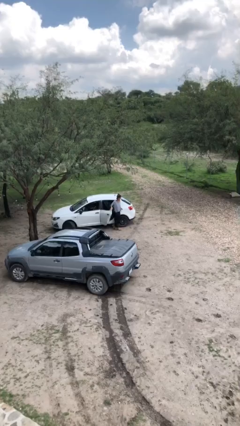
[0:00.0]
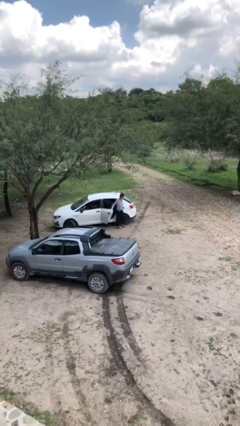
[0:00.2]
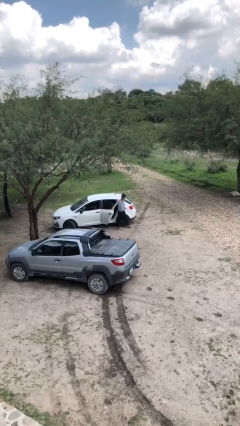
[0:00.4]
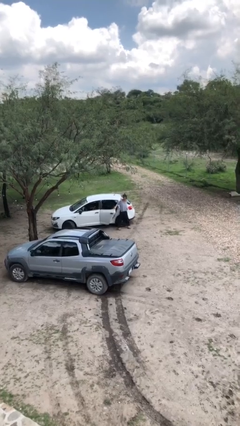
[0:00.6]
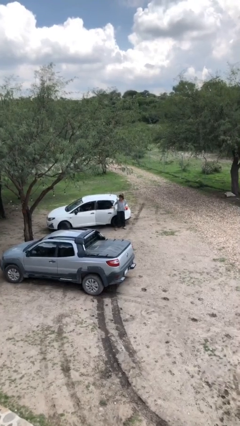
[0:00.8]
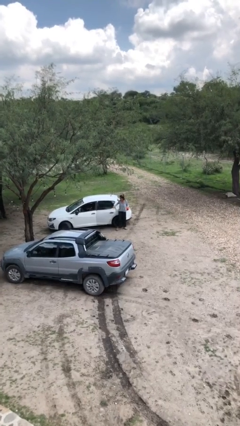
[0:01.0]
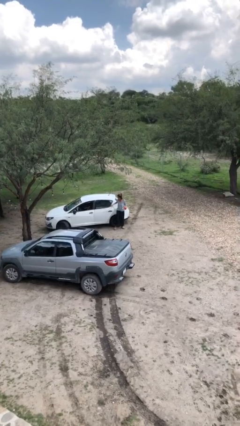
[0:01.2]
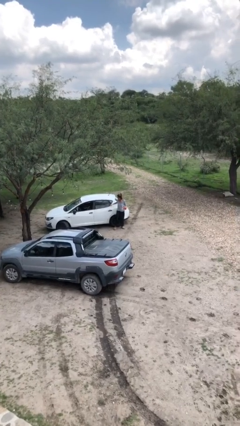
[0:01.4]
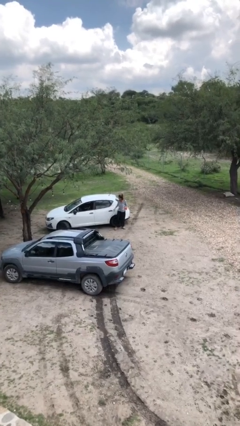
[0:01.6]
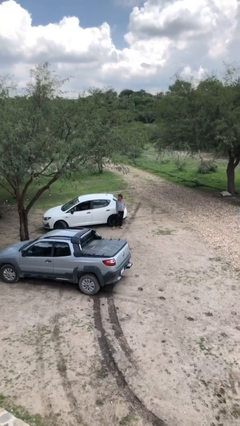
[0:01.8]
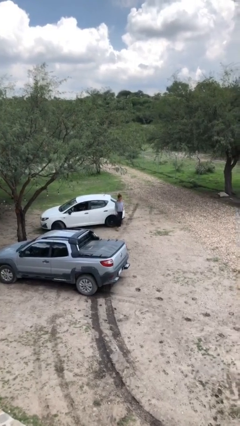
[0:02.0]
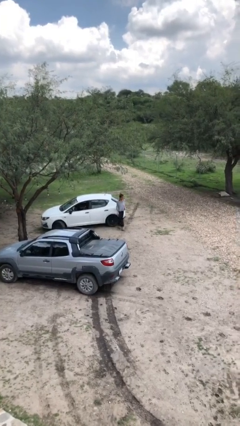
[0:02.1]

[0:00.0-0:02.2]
person closes car door

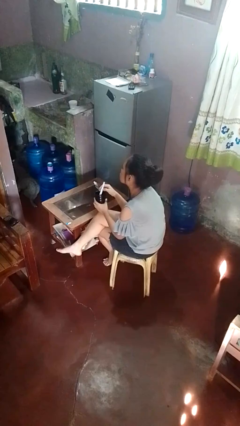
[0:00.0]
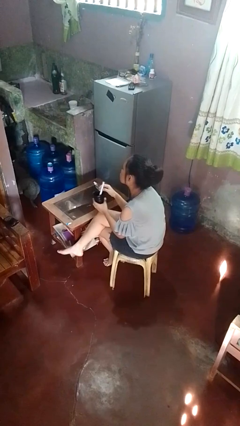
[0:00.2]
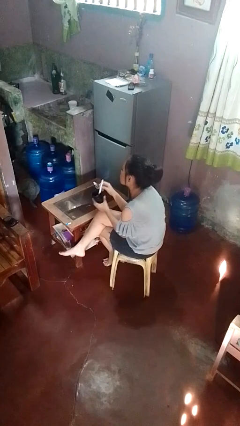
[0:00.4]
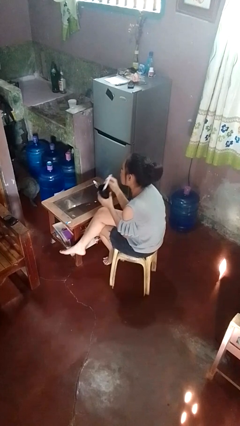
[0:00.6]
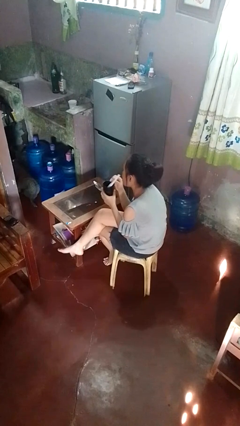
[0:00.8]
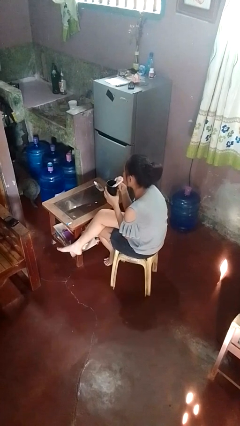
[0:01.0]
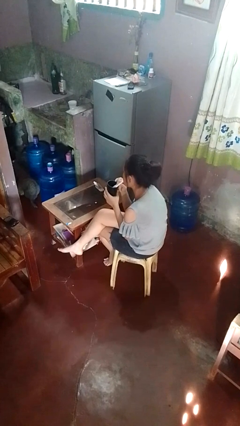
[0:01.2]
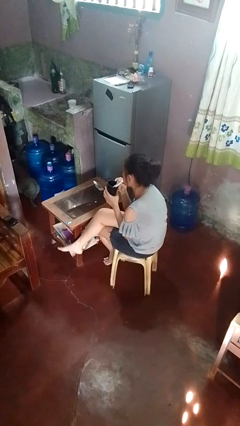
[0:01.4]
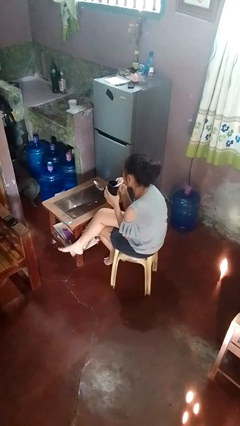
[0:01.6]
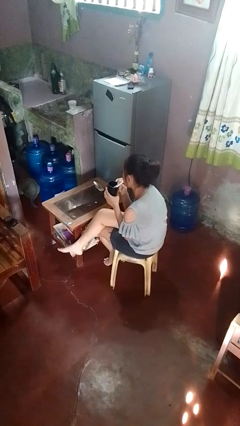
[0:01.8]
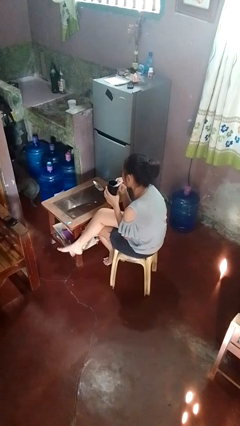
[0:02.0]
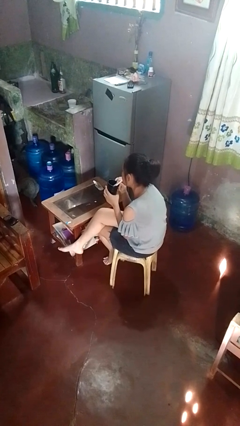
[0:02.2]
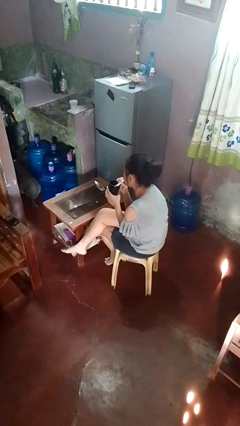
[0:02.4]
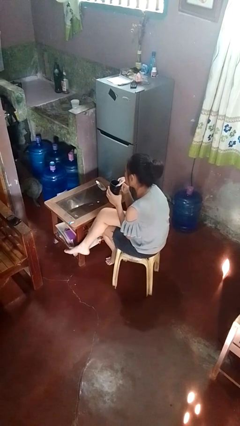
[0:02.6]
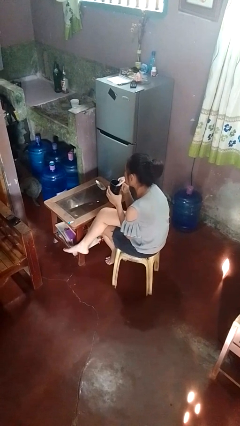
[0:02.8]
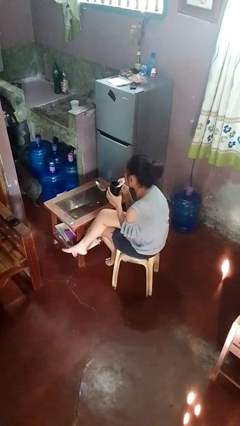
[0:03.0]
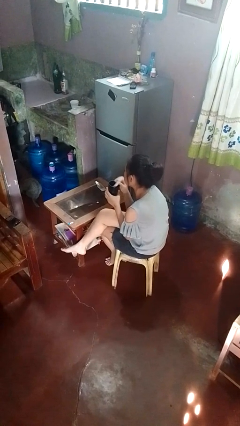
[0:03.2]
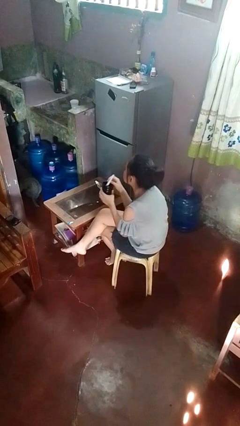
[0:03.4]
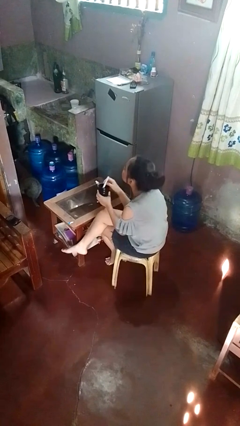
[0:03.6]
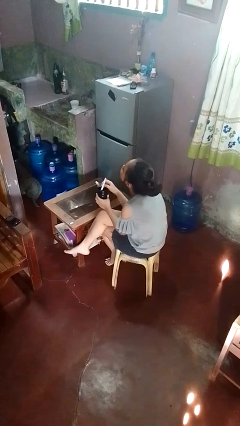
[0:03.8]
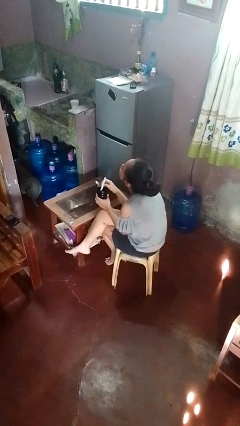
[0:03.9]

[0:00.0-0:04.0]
person drinks from straw

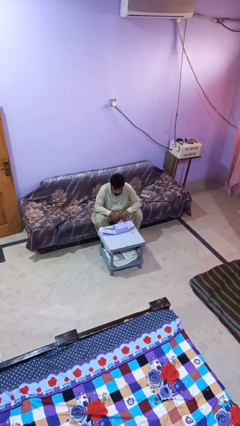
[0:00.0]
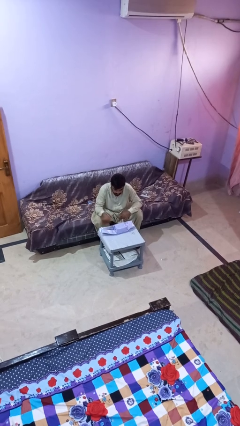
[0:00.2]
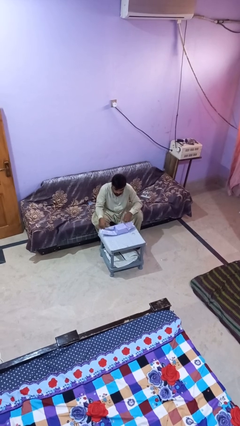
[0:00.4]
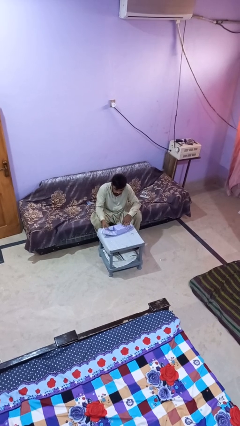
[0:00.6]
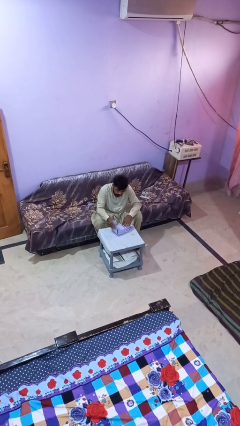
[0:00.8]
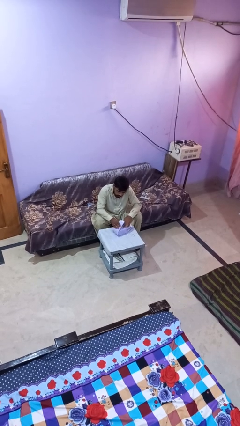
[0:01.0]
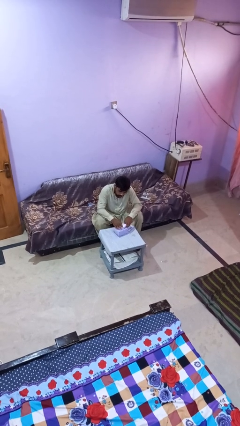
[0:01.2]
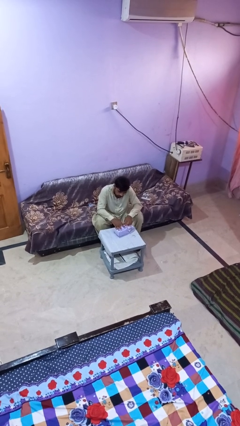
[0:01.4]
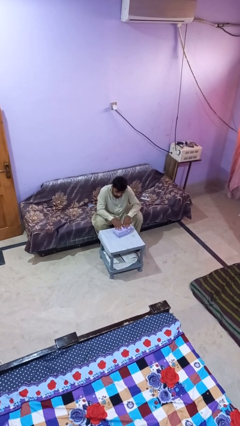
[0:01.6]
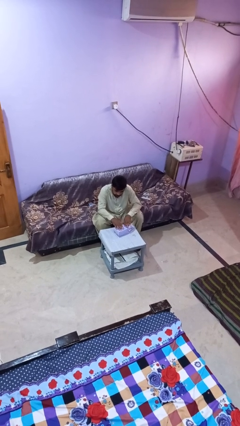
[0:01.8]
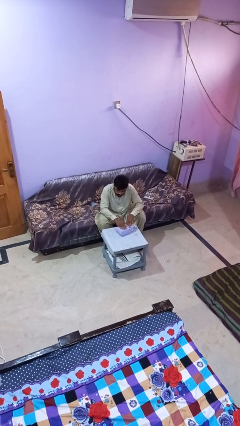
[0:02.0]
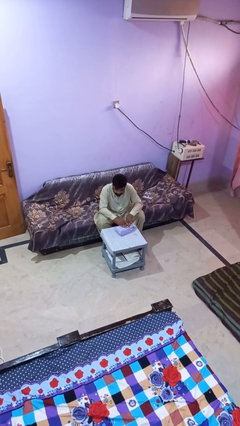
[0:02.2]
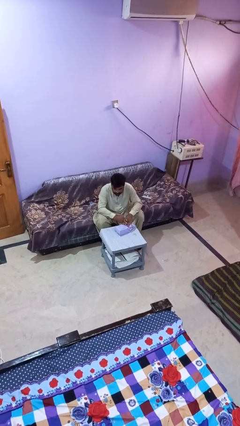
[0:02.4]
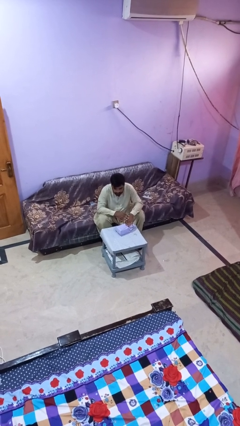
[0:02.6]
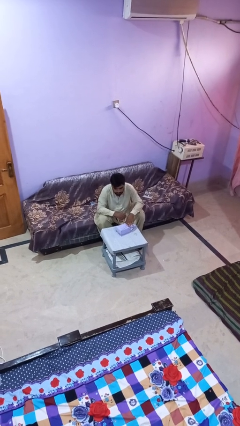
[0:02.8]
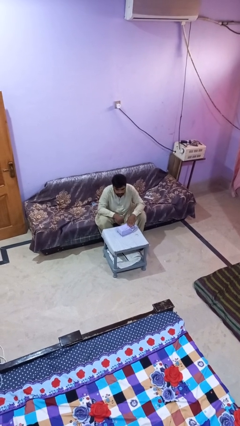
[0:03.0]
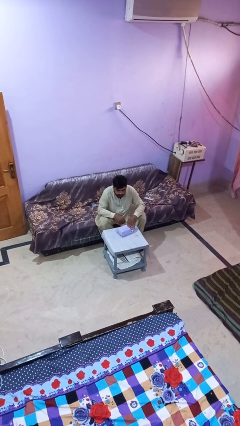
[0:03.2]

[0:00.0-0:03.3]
person wraps box

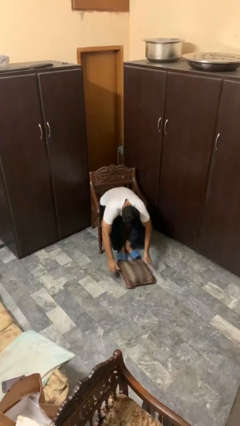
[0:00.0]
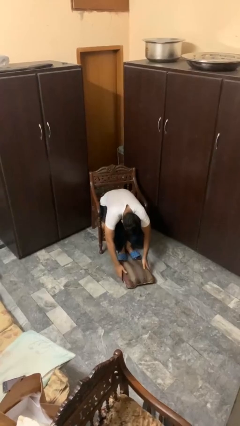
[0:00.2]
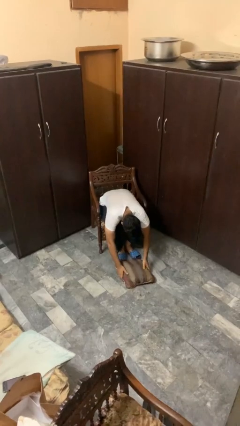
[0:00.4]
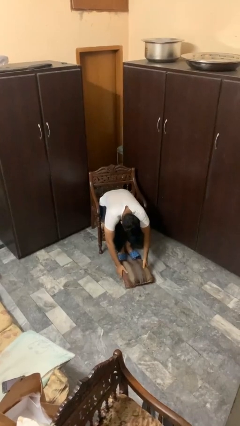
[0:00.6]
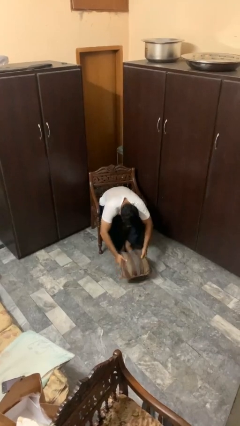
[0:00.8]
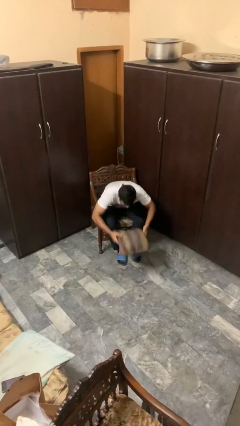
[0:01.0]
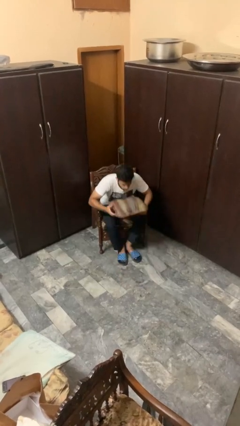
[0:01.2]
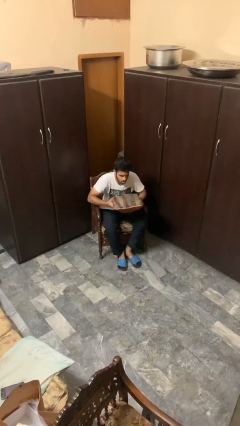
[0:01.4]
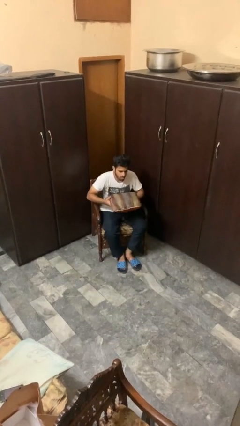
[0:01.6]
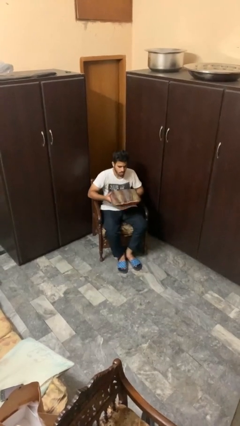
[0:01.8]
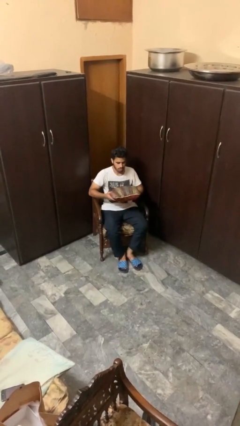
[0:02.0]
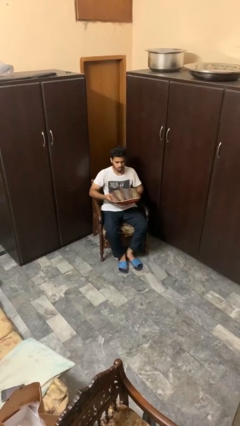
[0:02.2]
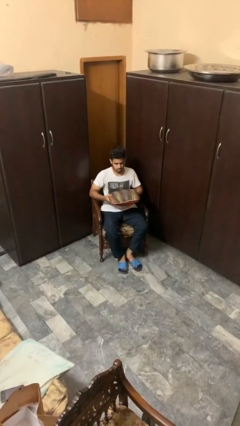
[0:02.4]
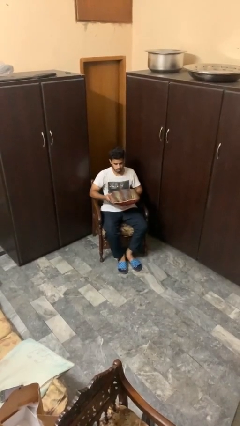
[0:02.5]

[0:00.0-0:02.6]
person picks up object from floor

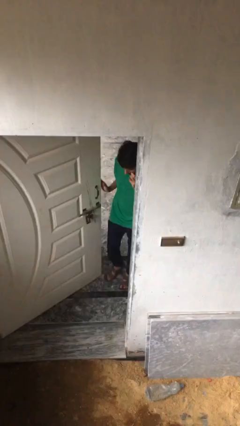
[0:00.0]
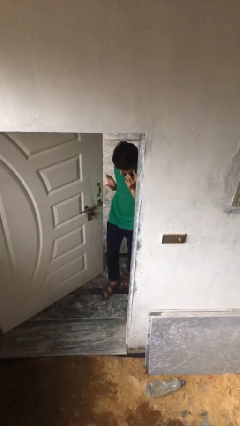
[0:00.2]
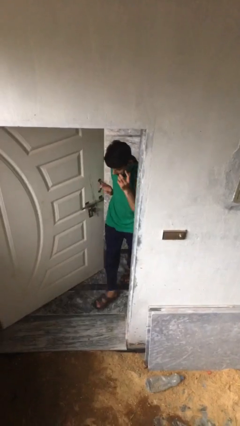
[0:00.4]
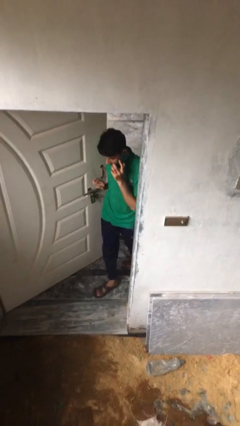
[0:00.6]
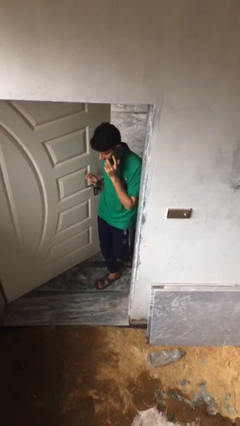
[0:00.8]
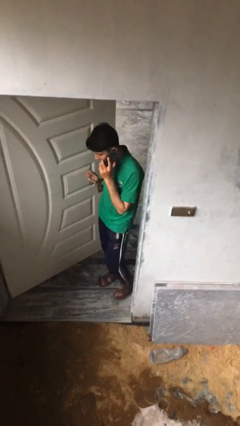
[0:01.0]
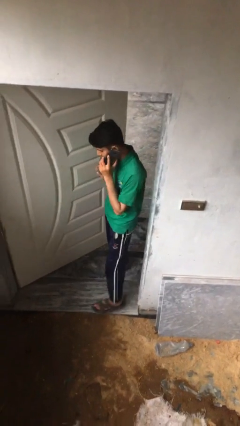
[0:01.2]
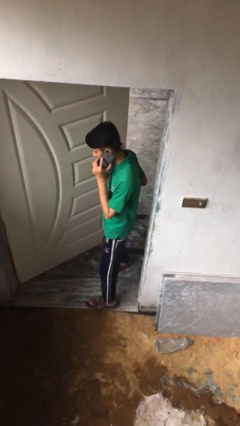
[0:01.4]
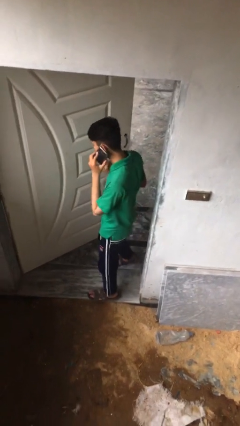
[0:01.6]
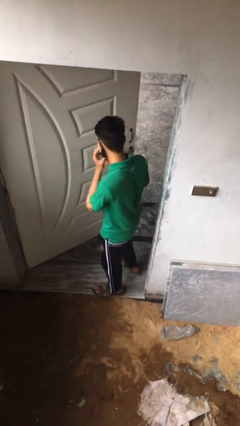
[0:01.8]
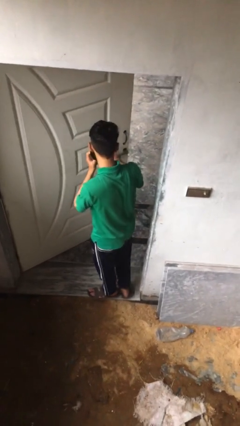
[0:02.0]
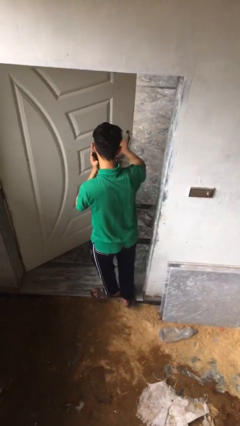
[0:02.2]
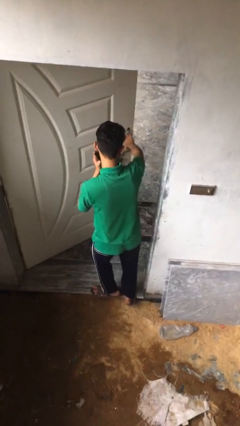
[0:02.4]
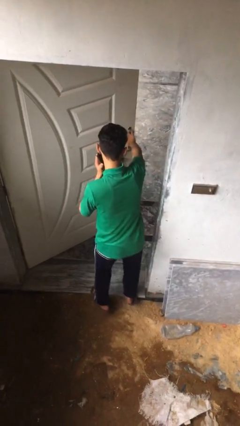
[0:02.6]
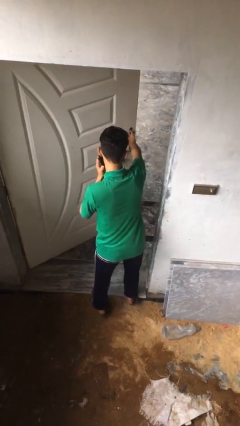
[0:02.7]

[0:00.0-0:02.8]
person enters scene through structure

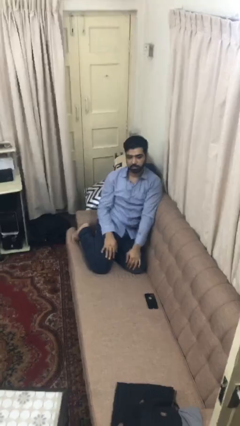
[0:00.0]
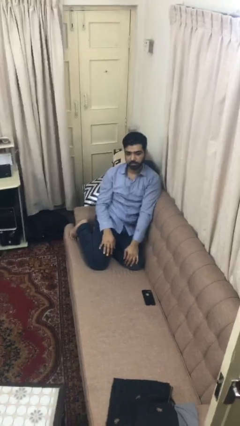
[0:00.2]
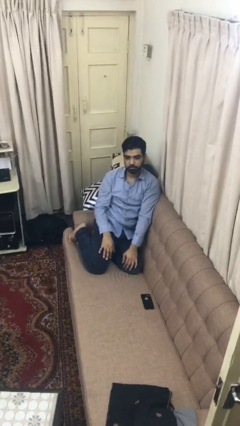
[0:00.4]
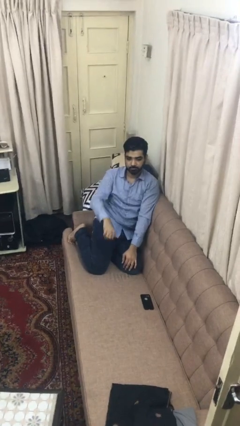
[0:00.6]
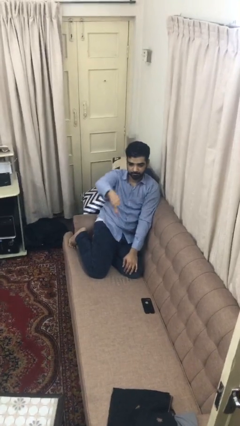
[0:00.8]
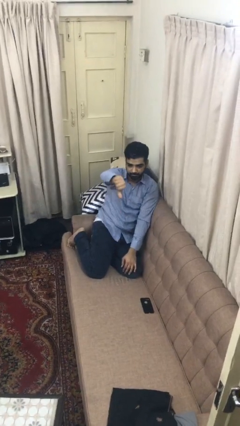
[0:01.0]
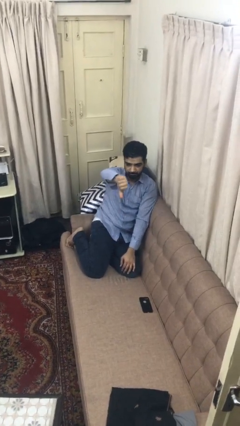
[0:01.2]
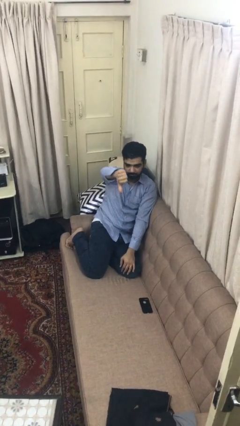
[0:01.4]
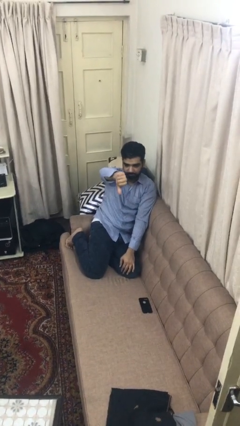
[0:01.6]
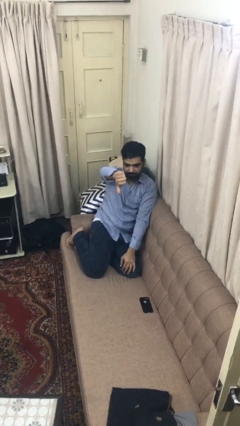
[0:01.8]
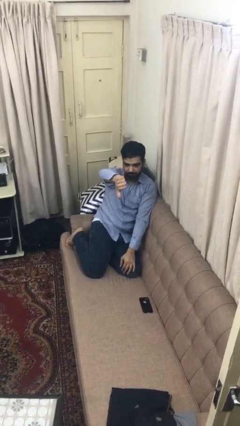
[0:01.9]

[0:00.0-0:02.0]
person gestures thumbs down

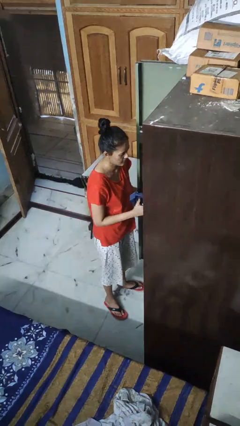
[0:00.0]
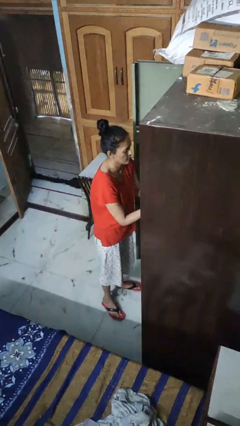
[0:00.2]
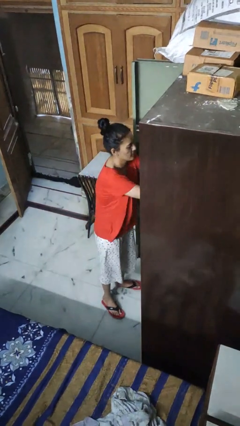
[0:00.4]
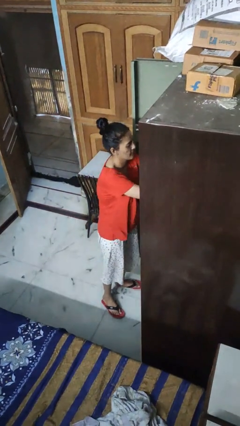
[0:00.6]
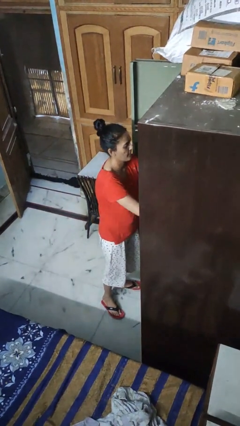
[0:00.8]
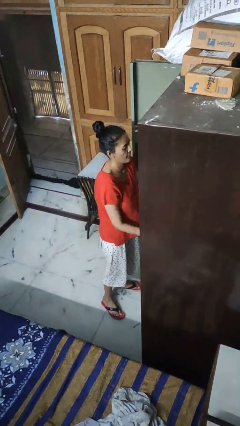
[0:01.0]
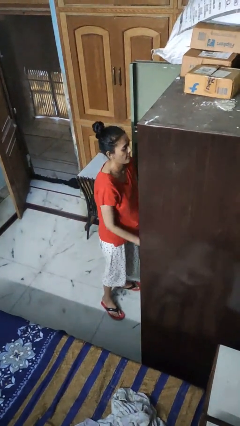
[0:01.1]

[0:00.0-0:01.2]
person puts clothes into dresser
